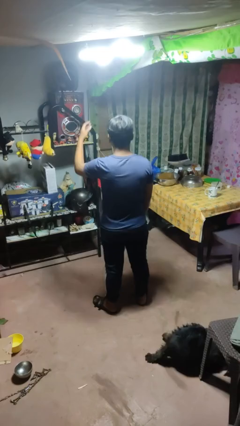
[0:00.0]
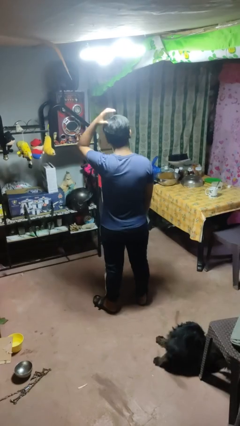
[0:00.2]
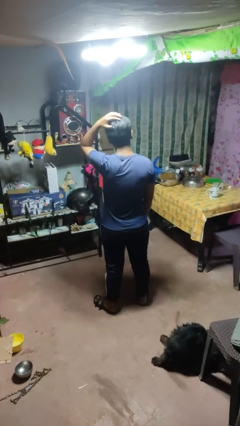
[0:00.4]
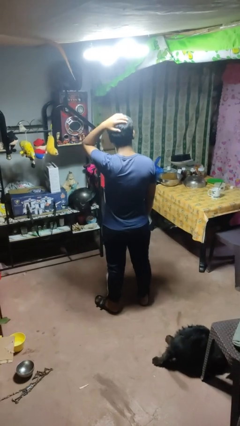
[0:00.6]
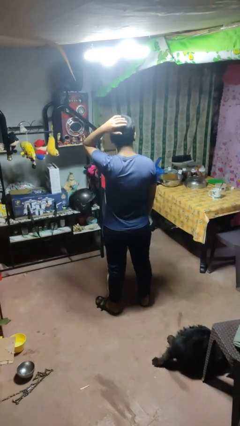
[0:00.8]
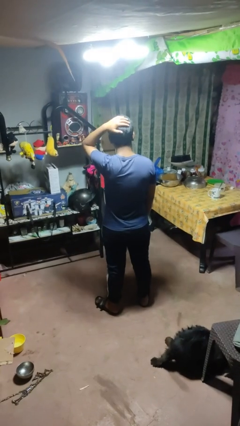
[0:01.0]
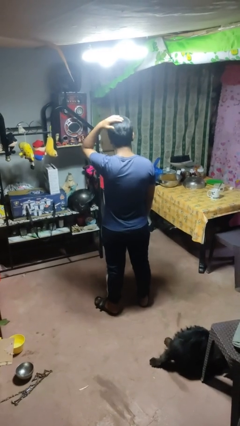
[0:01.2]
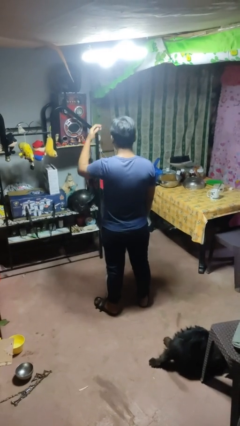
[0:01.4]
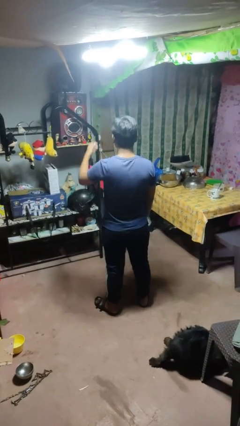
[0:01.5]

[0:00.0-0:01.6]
person pats head

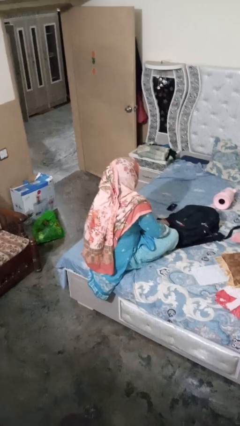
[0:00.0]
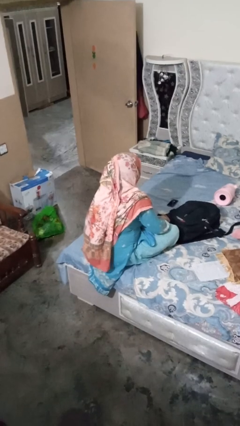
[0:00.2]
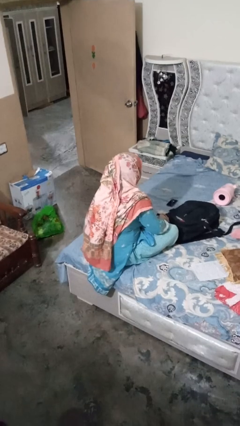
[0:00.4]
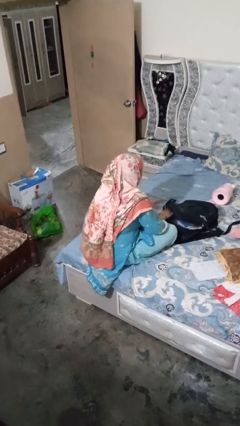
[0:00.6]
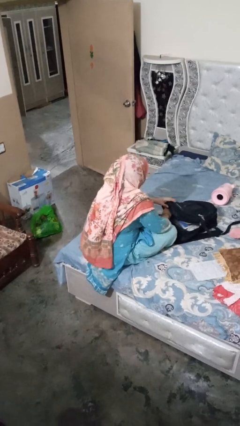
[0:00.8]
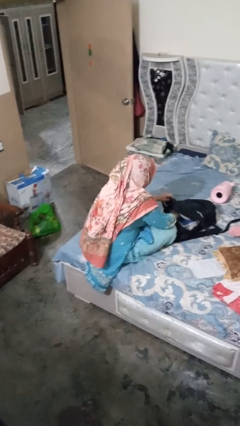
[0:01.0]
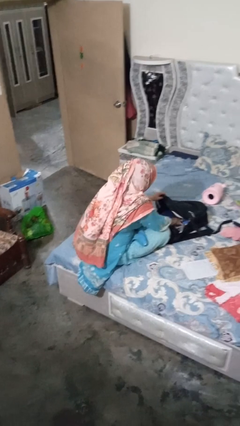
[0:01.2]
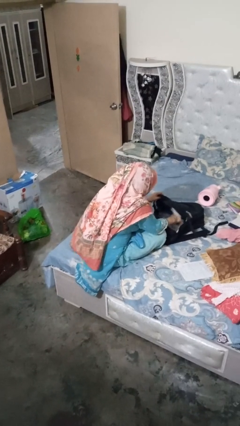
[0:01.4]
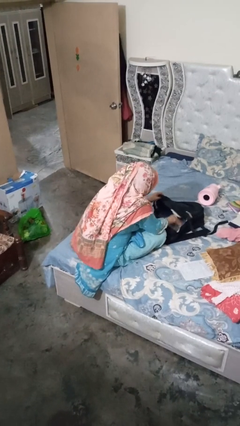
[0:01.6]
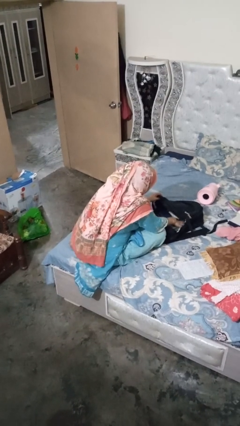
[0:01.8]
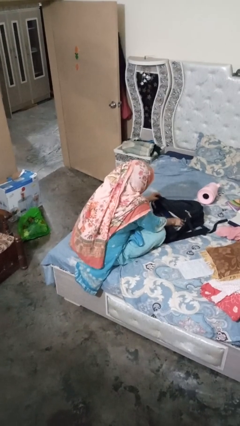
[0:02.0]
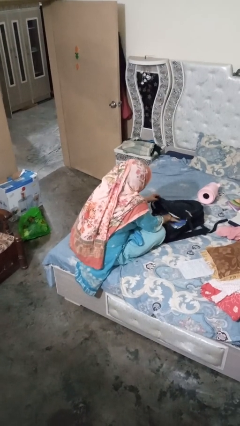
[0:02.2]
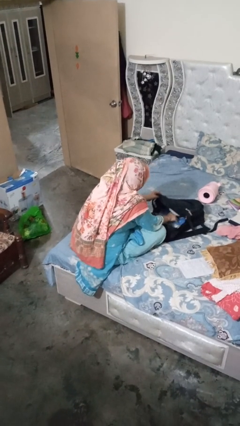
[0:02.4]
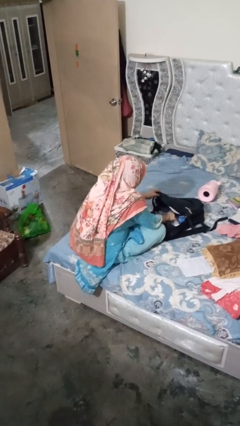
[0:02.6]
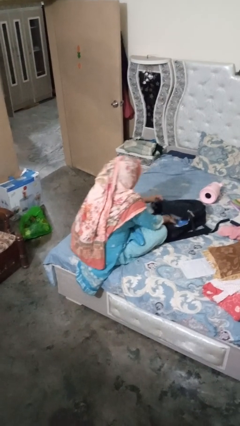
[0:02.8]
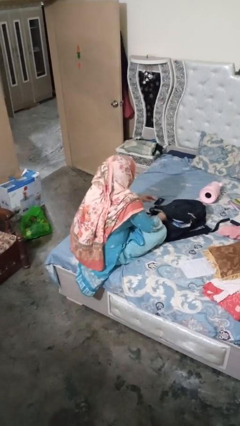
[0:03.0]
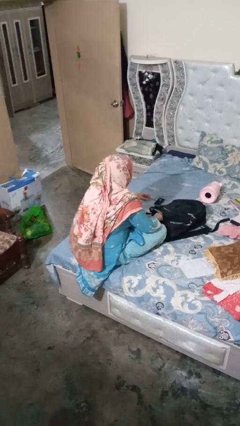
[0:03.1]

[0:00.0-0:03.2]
person searches in bag

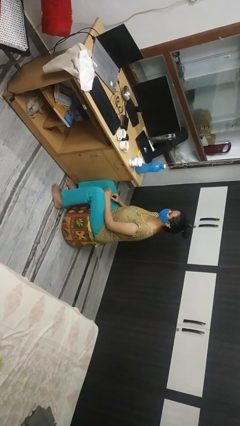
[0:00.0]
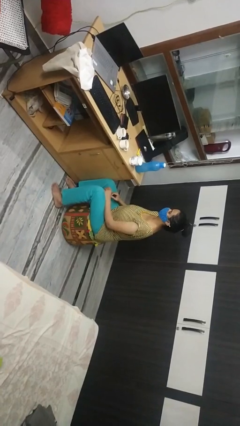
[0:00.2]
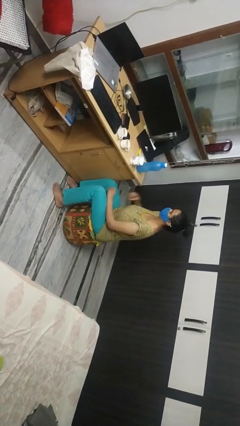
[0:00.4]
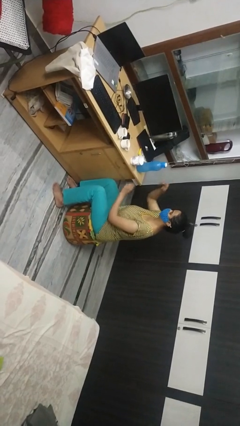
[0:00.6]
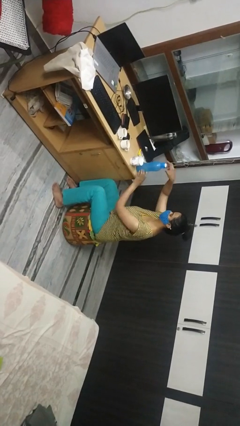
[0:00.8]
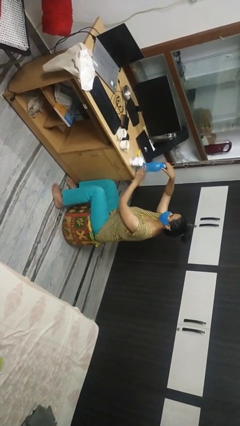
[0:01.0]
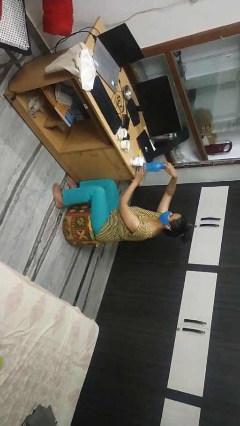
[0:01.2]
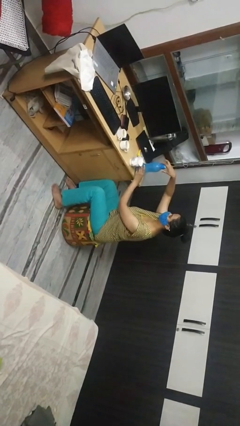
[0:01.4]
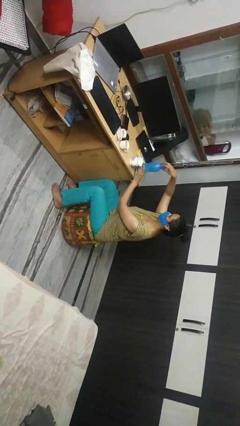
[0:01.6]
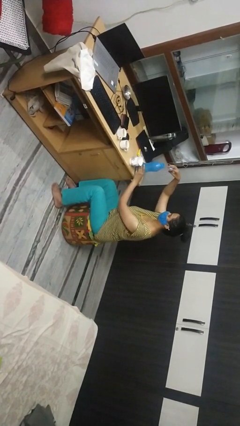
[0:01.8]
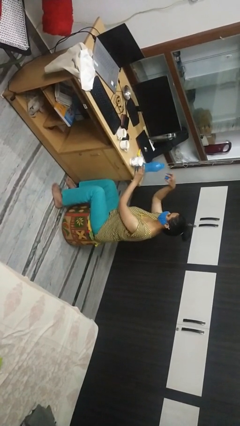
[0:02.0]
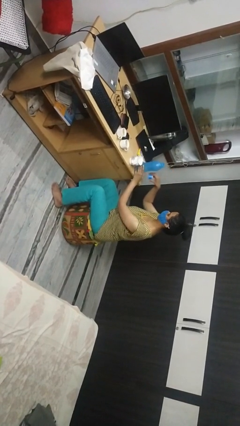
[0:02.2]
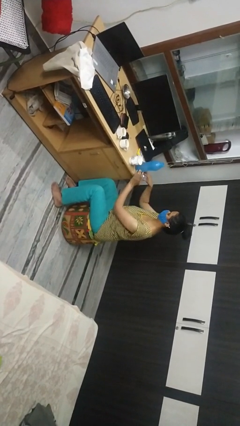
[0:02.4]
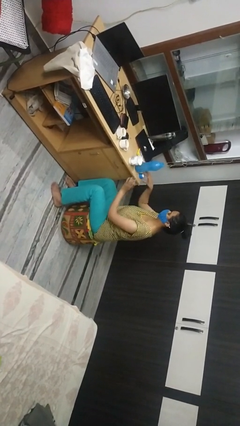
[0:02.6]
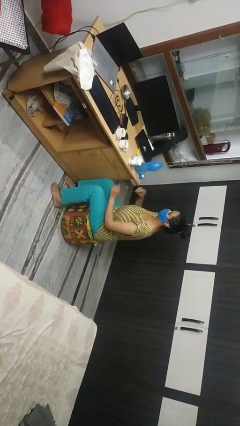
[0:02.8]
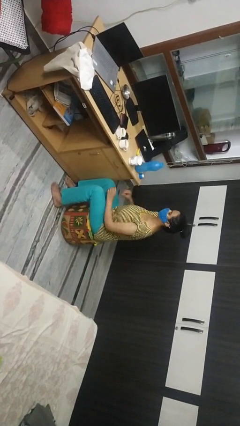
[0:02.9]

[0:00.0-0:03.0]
person unscrews lid from bottle

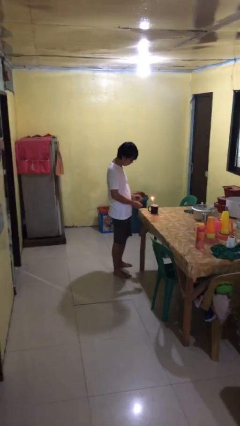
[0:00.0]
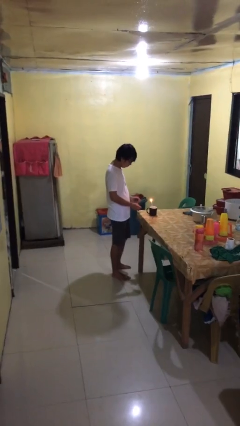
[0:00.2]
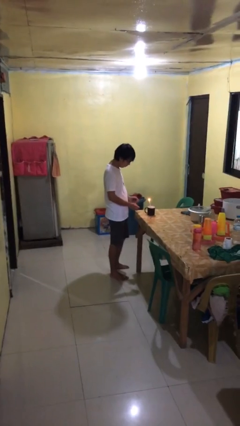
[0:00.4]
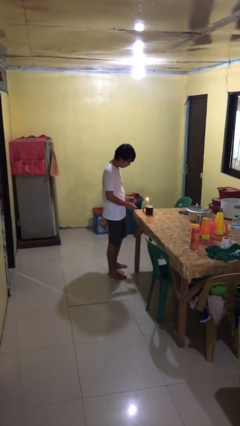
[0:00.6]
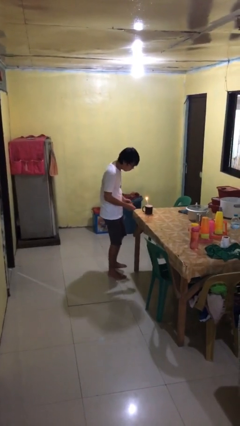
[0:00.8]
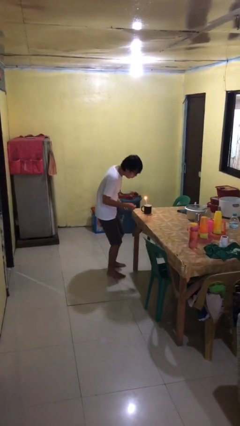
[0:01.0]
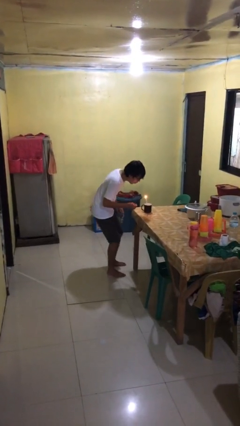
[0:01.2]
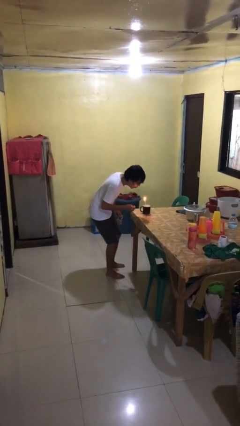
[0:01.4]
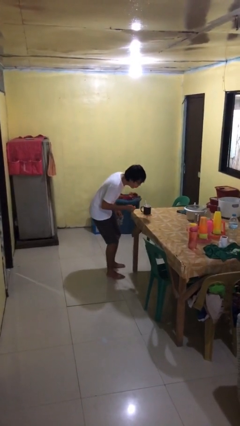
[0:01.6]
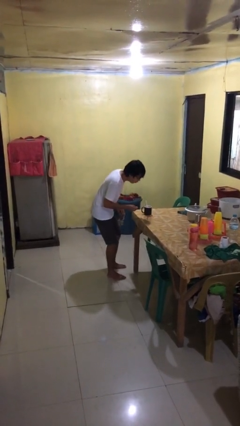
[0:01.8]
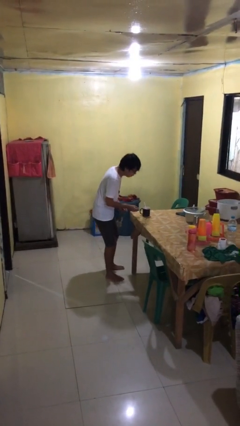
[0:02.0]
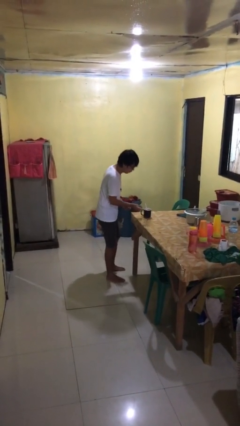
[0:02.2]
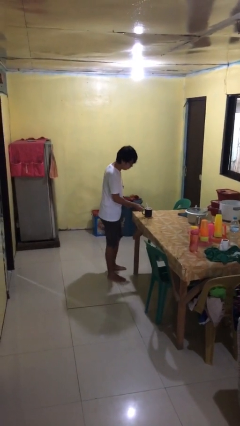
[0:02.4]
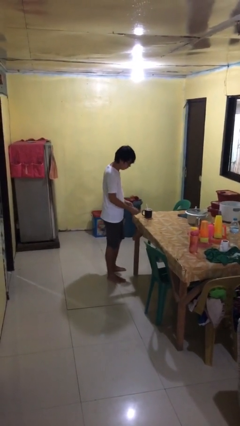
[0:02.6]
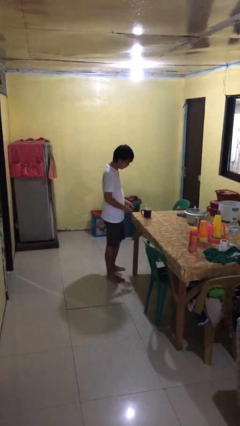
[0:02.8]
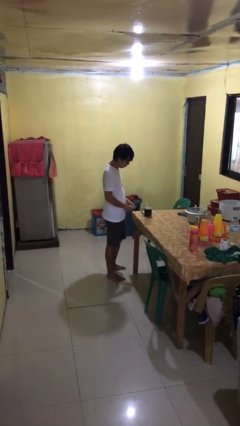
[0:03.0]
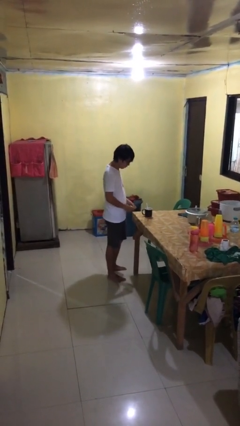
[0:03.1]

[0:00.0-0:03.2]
person extinguishes candle

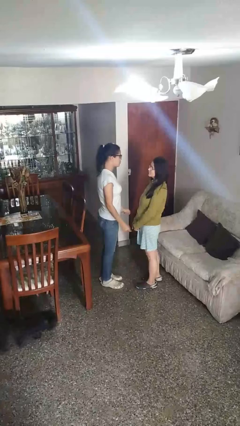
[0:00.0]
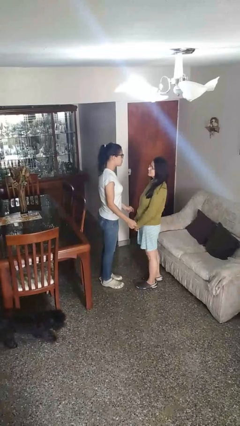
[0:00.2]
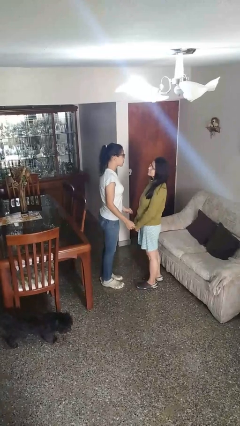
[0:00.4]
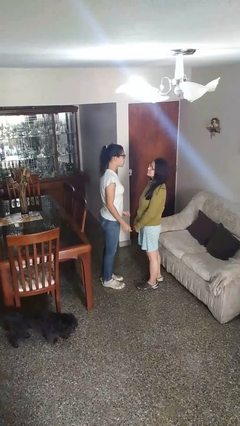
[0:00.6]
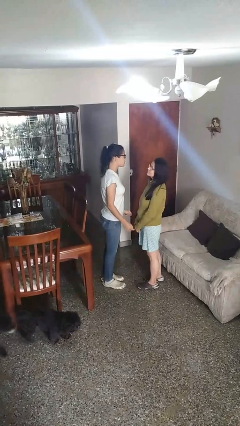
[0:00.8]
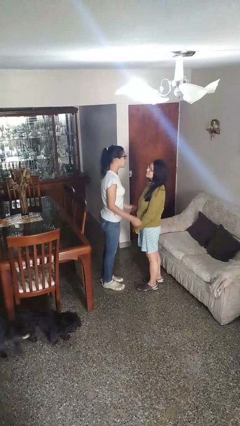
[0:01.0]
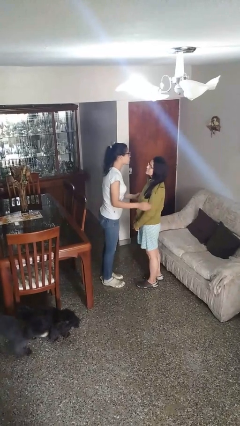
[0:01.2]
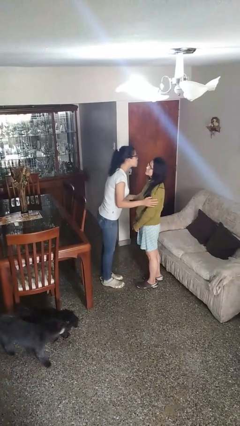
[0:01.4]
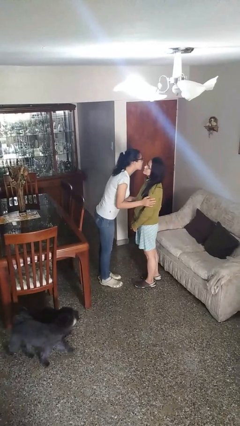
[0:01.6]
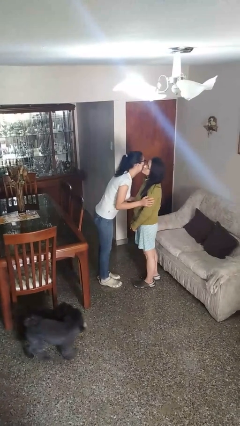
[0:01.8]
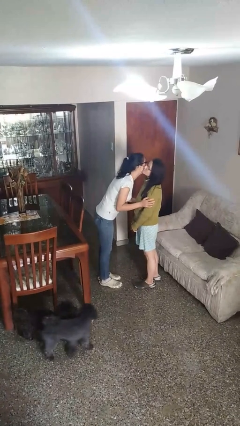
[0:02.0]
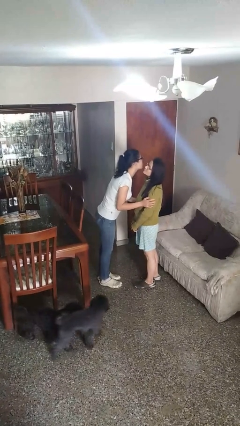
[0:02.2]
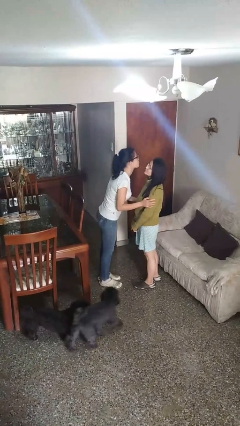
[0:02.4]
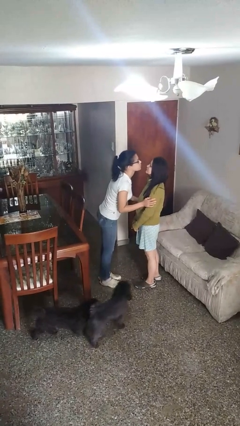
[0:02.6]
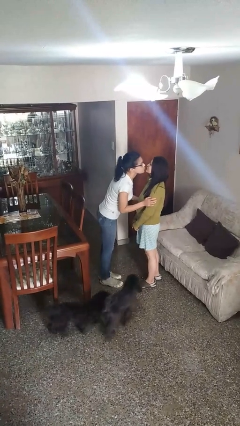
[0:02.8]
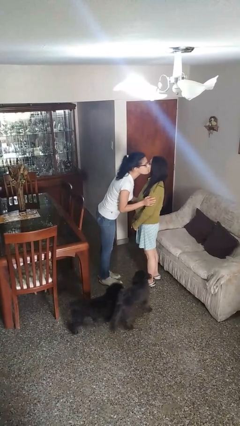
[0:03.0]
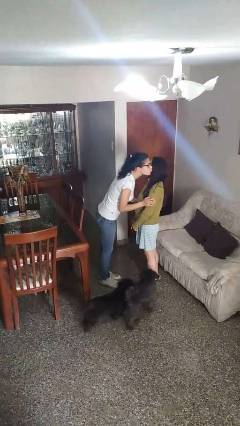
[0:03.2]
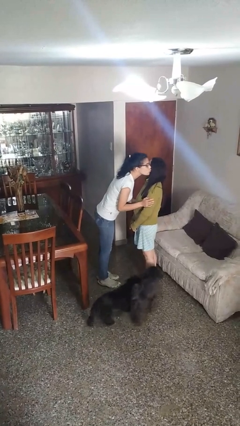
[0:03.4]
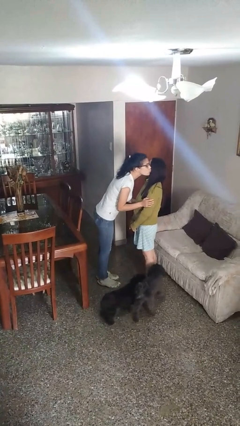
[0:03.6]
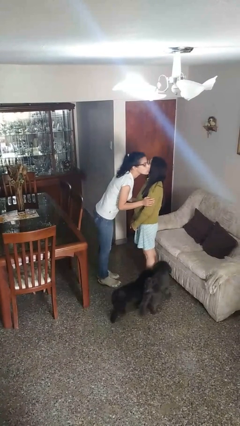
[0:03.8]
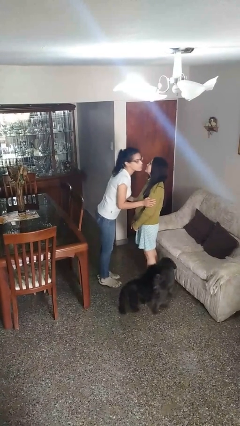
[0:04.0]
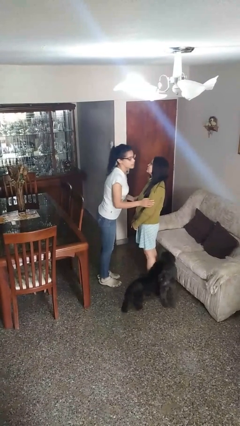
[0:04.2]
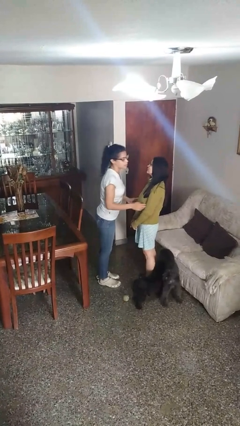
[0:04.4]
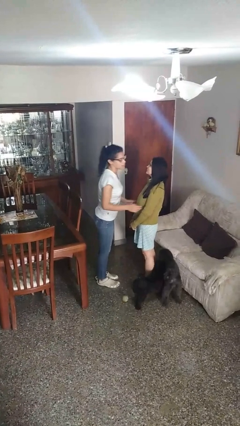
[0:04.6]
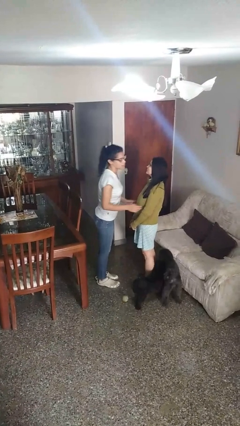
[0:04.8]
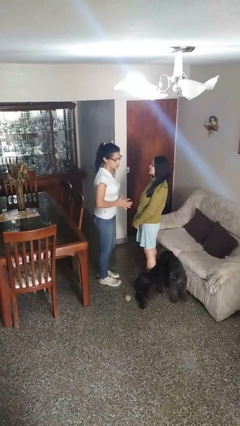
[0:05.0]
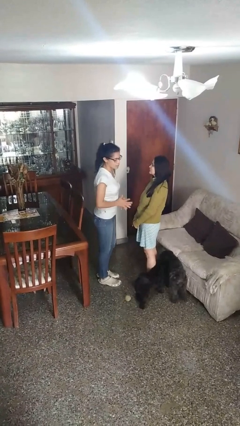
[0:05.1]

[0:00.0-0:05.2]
person kisses cheek of person

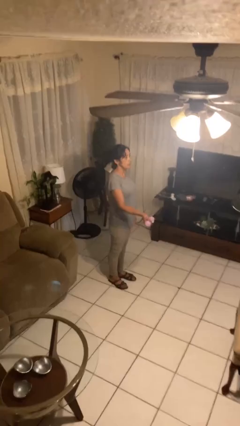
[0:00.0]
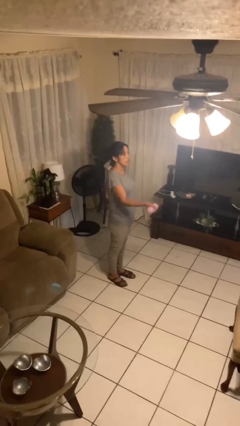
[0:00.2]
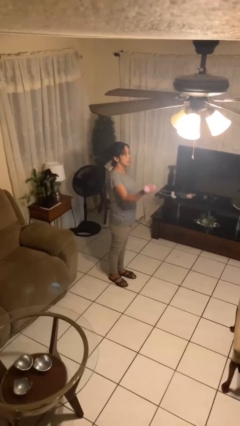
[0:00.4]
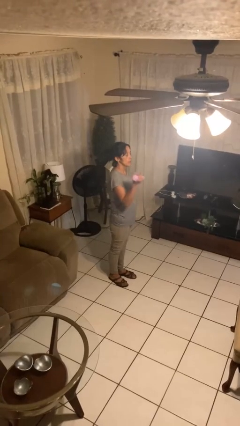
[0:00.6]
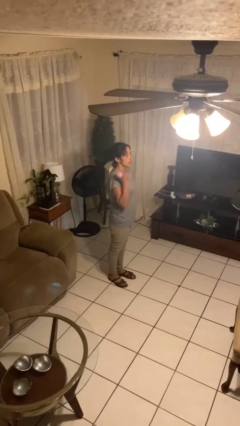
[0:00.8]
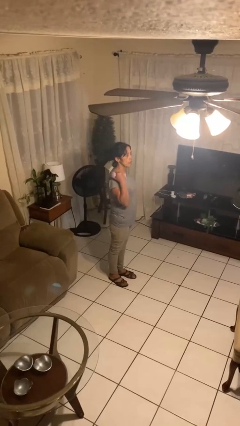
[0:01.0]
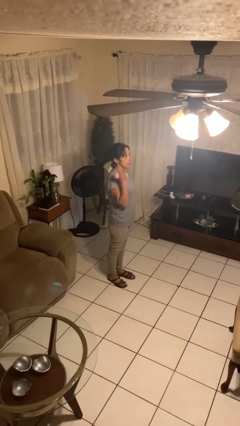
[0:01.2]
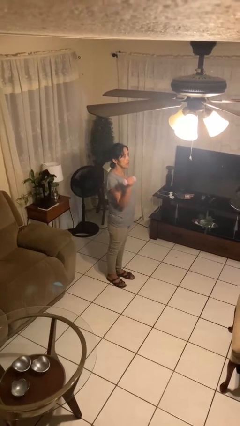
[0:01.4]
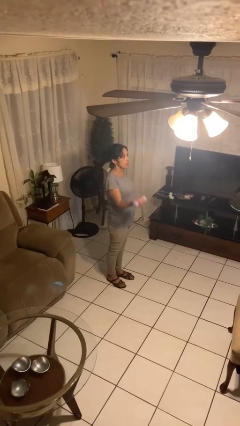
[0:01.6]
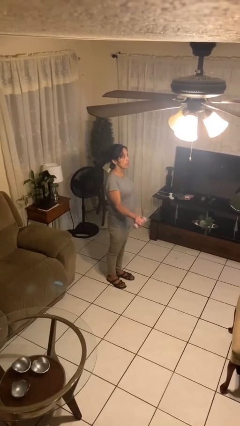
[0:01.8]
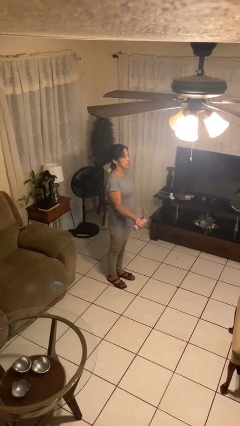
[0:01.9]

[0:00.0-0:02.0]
person lifts dumbbells
